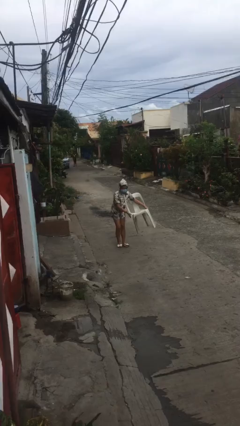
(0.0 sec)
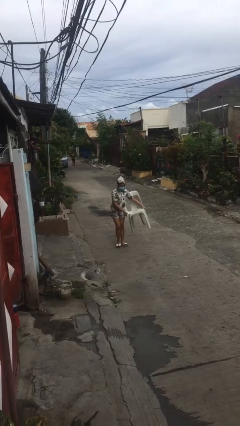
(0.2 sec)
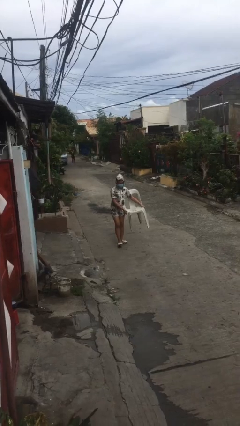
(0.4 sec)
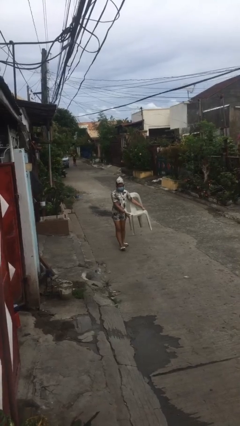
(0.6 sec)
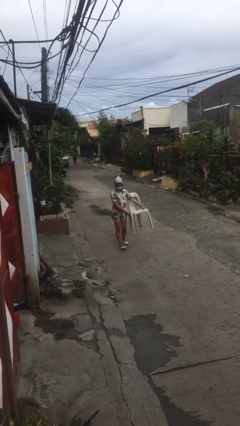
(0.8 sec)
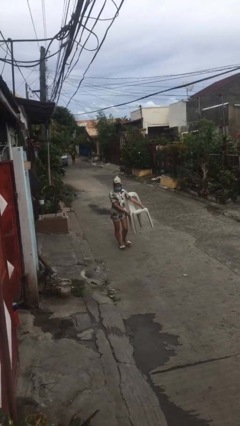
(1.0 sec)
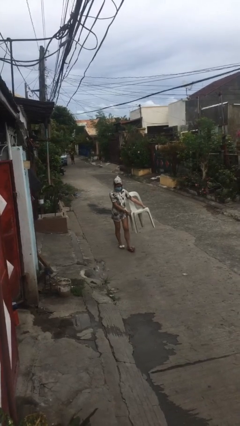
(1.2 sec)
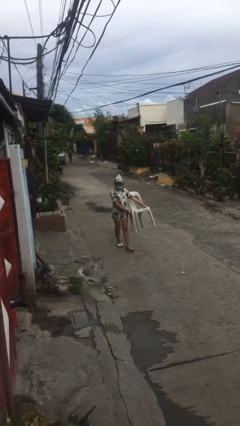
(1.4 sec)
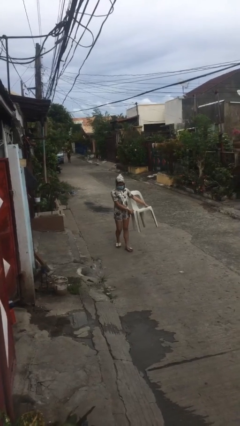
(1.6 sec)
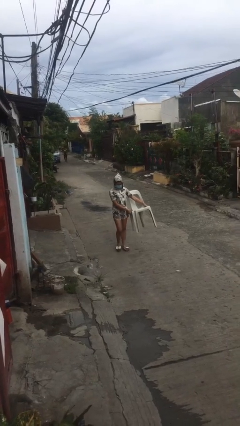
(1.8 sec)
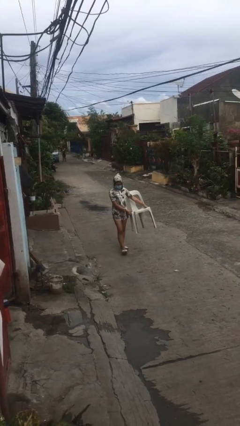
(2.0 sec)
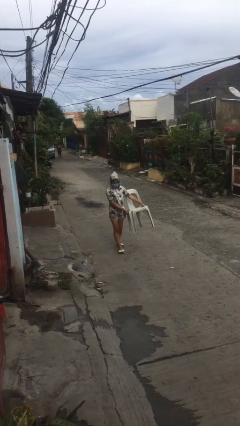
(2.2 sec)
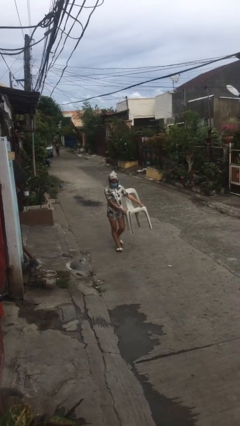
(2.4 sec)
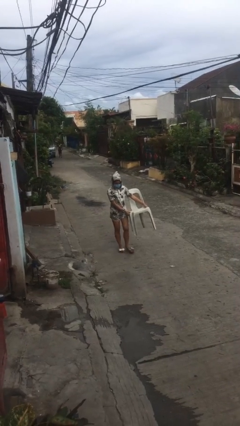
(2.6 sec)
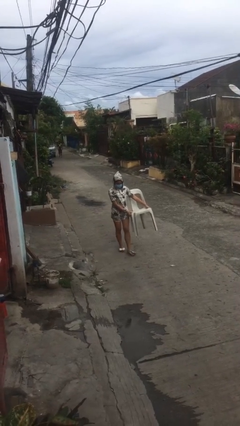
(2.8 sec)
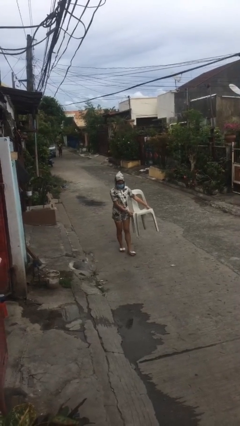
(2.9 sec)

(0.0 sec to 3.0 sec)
person carries heavy object

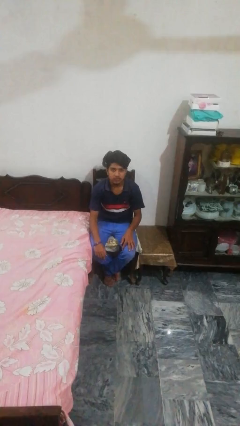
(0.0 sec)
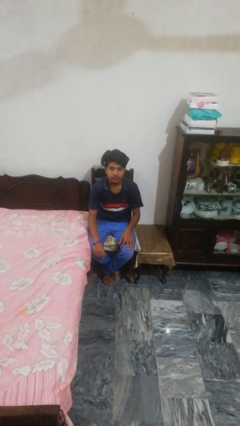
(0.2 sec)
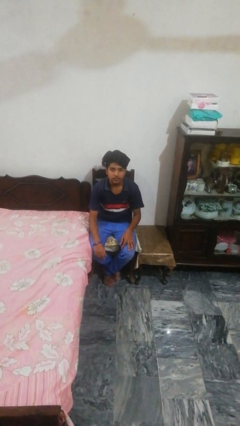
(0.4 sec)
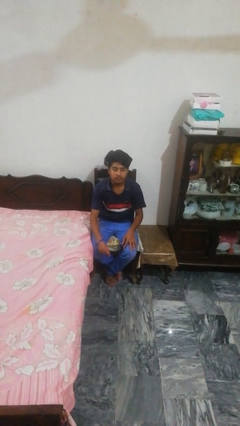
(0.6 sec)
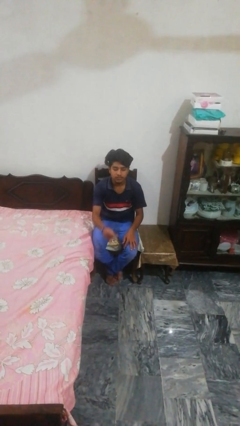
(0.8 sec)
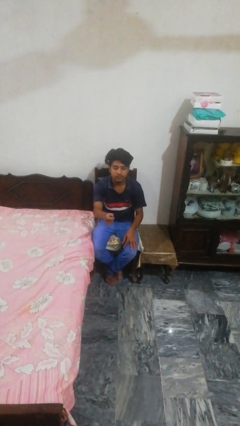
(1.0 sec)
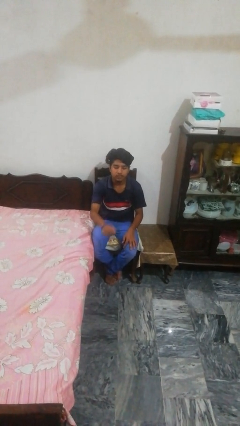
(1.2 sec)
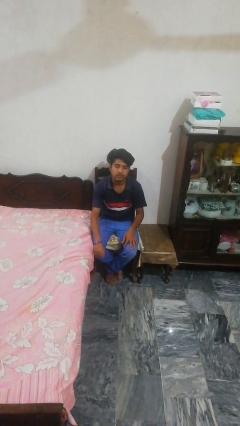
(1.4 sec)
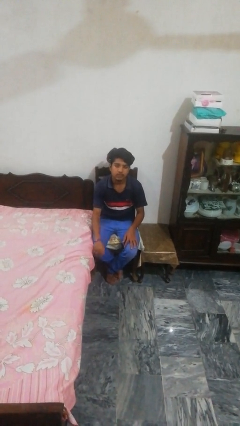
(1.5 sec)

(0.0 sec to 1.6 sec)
person snaps fingers

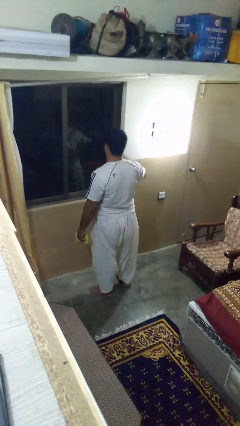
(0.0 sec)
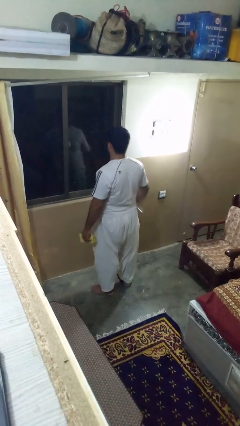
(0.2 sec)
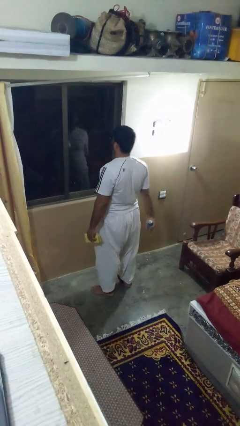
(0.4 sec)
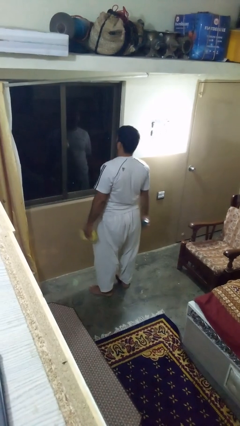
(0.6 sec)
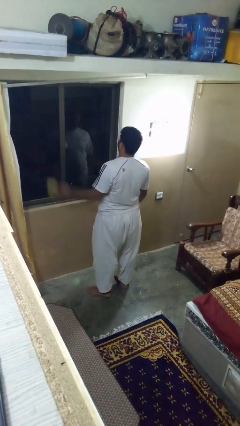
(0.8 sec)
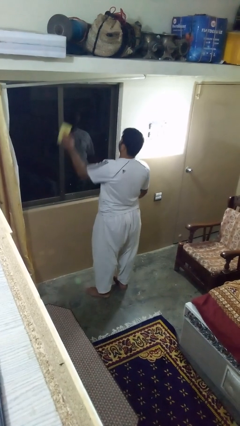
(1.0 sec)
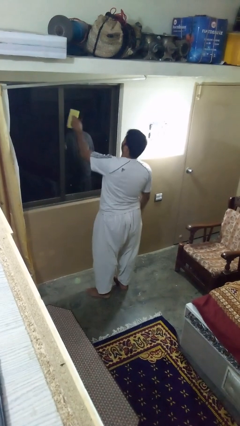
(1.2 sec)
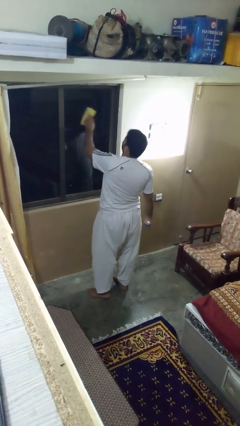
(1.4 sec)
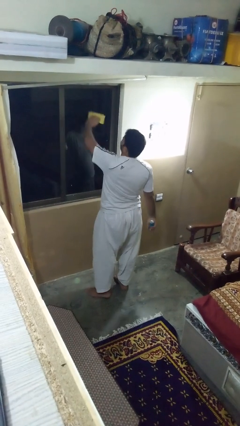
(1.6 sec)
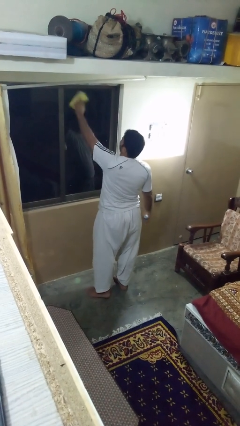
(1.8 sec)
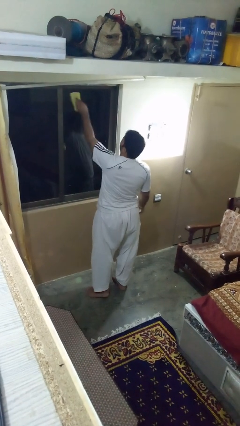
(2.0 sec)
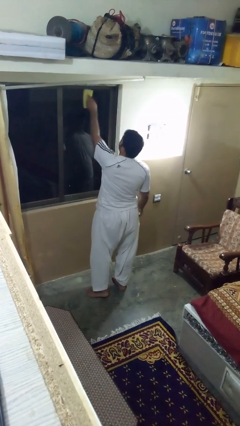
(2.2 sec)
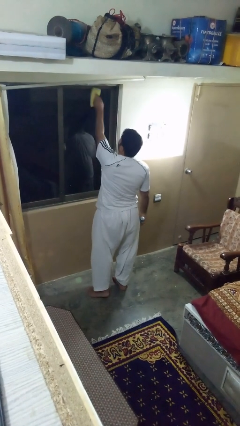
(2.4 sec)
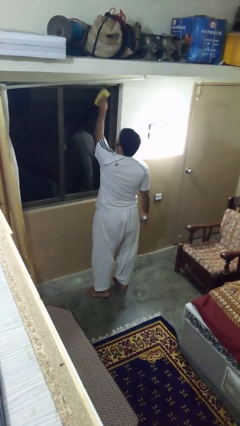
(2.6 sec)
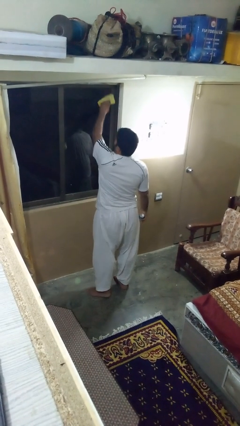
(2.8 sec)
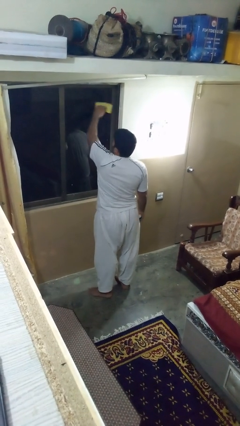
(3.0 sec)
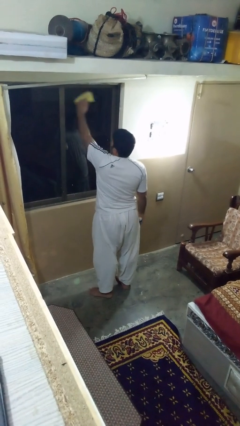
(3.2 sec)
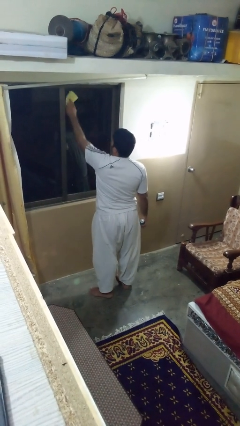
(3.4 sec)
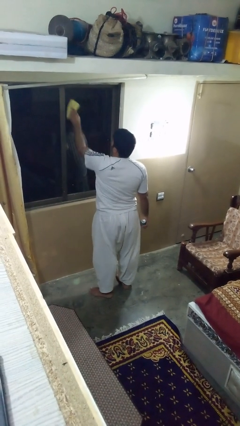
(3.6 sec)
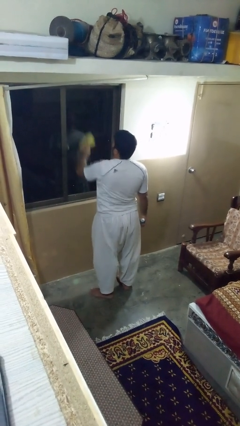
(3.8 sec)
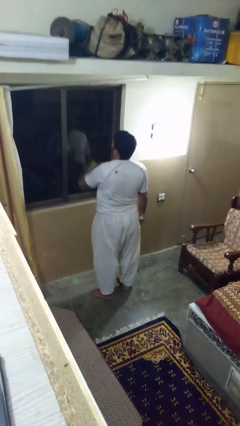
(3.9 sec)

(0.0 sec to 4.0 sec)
person washes window

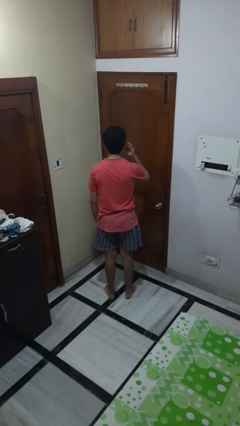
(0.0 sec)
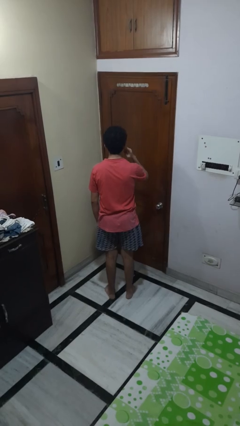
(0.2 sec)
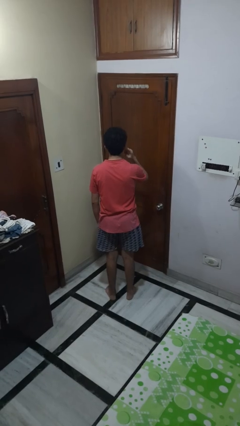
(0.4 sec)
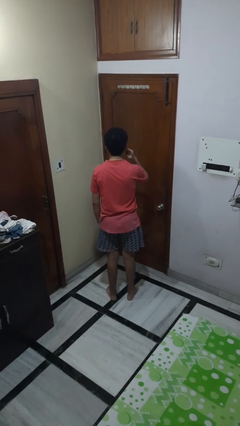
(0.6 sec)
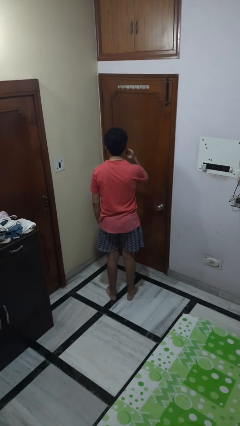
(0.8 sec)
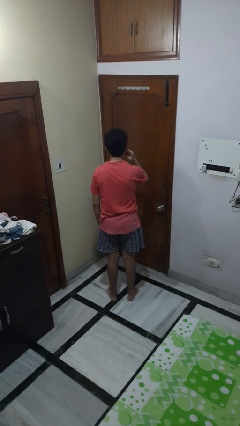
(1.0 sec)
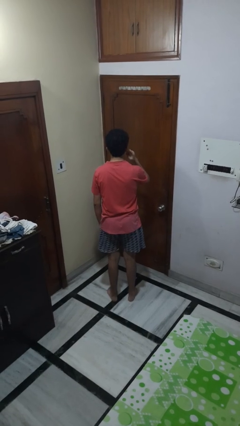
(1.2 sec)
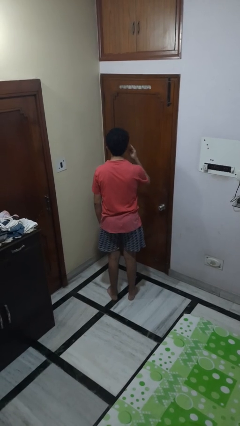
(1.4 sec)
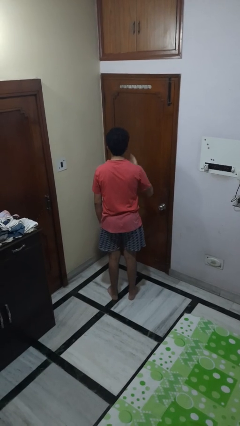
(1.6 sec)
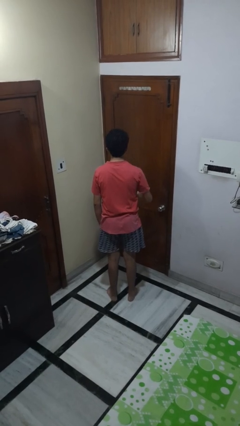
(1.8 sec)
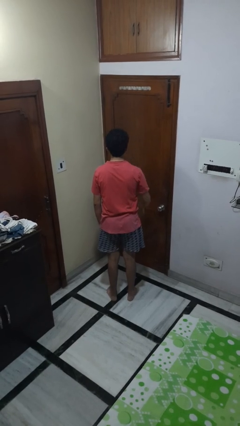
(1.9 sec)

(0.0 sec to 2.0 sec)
person gestures listen closely

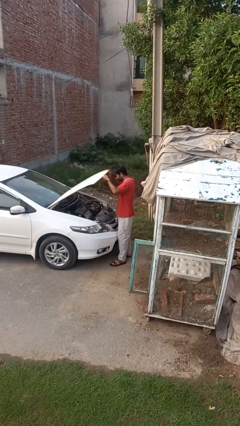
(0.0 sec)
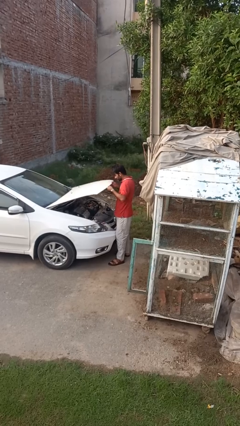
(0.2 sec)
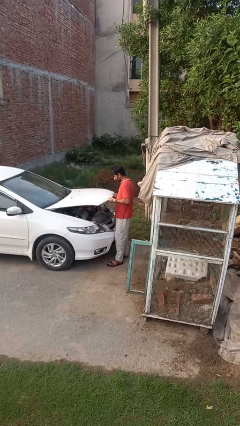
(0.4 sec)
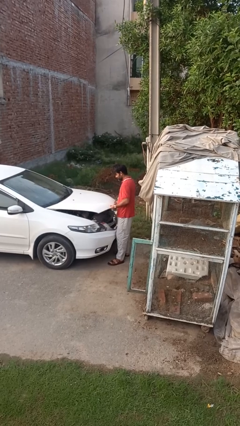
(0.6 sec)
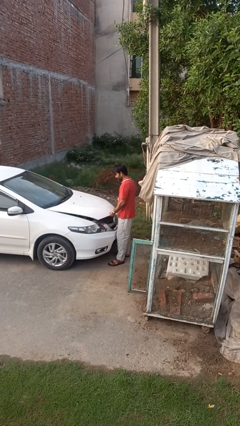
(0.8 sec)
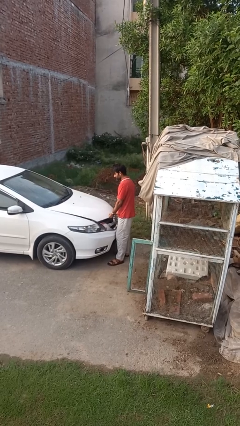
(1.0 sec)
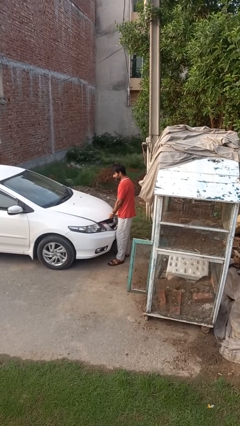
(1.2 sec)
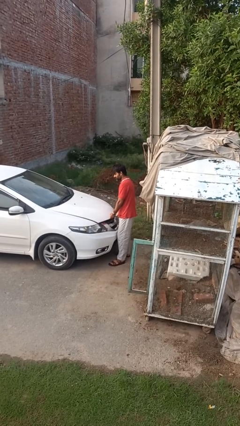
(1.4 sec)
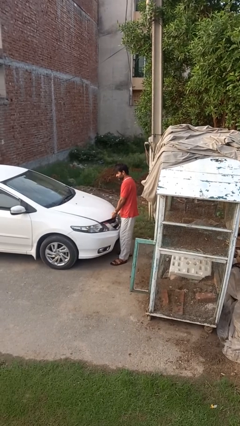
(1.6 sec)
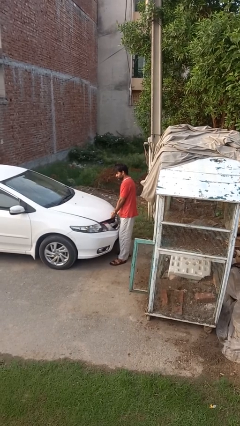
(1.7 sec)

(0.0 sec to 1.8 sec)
person closes car hood

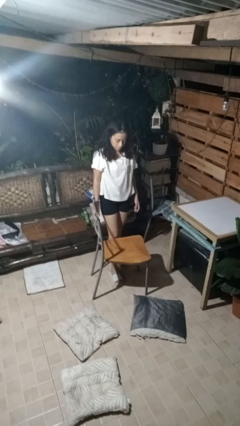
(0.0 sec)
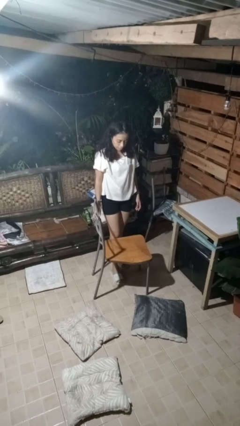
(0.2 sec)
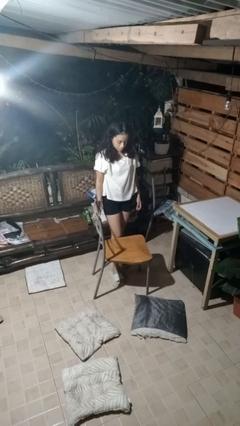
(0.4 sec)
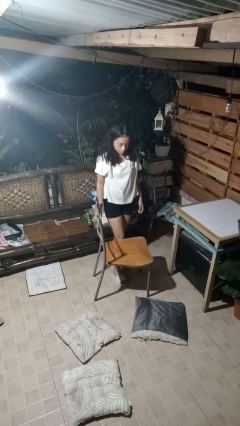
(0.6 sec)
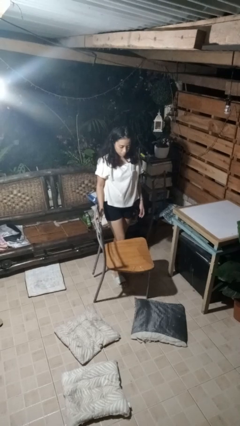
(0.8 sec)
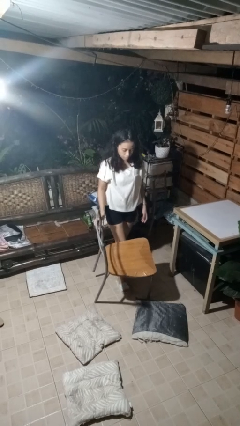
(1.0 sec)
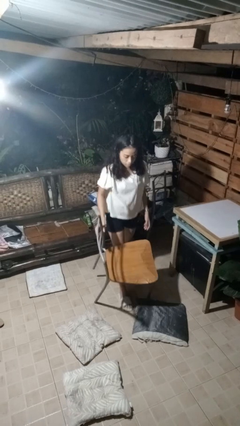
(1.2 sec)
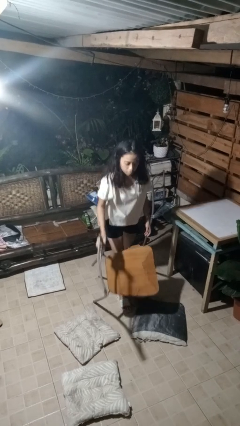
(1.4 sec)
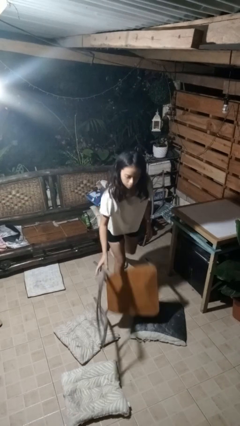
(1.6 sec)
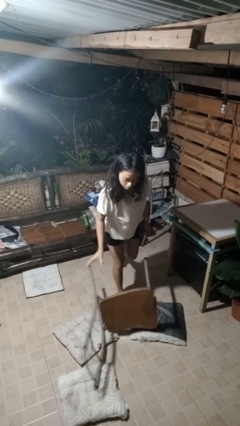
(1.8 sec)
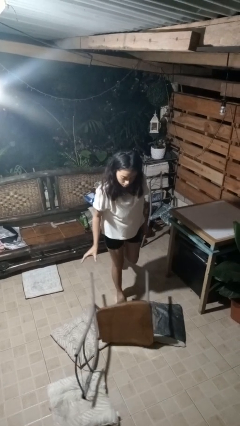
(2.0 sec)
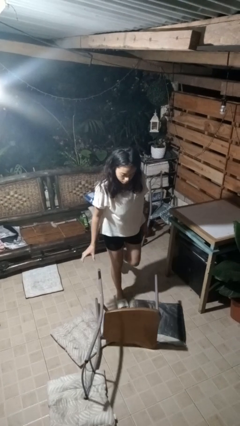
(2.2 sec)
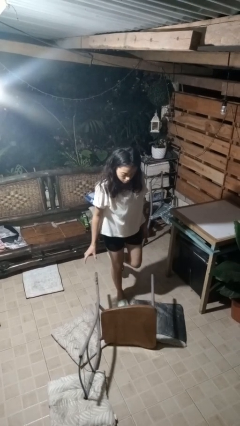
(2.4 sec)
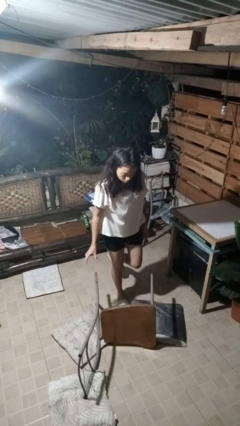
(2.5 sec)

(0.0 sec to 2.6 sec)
person knocks over furniture

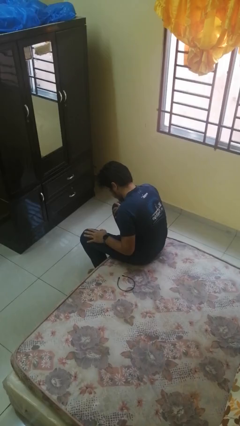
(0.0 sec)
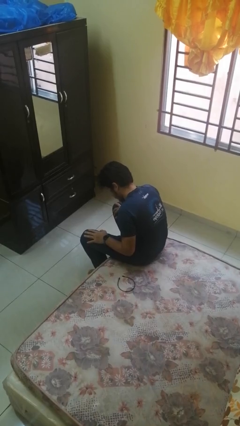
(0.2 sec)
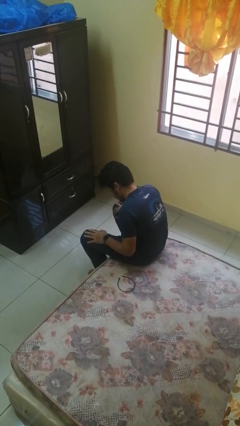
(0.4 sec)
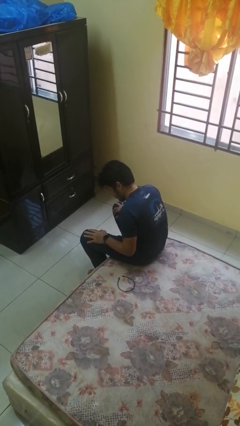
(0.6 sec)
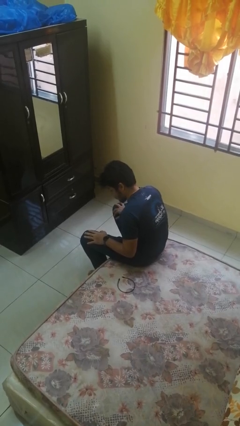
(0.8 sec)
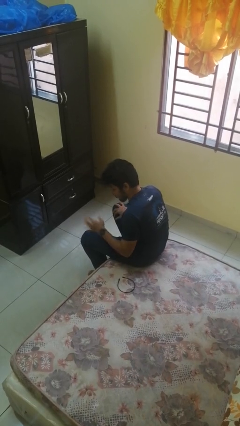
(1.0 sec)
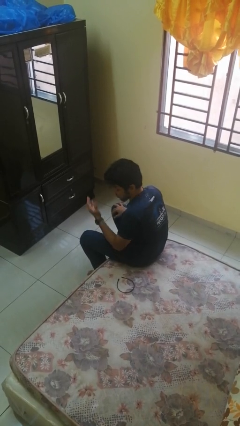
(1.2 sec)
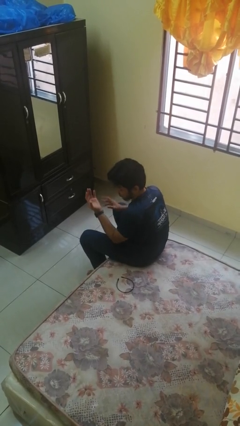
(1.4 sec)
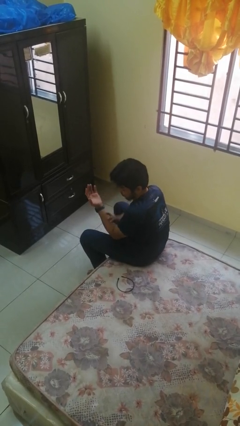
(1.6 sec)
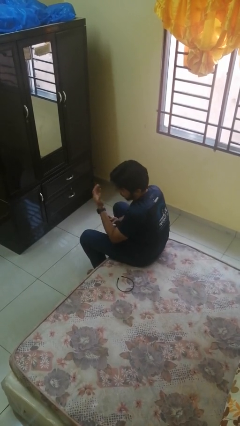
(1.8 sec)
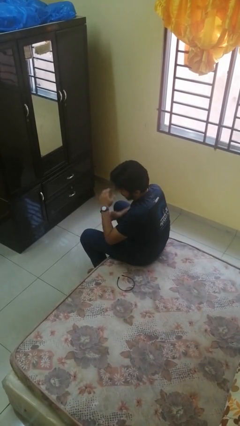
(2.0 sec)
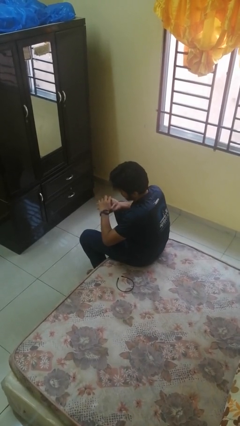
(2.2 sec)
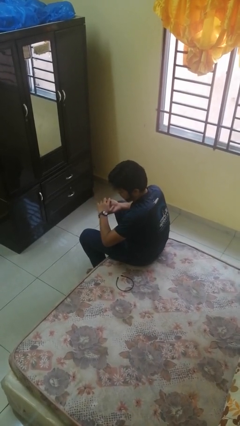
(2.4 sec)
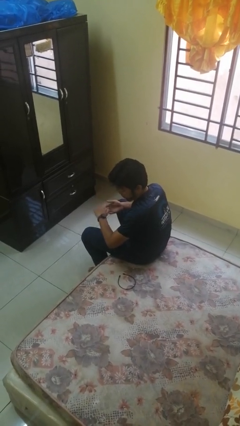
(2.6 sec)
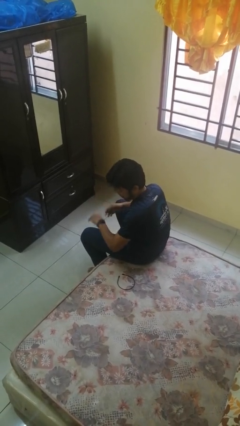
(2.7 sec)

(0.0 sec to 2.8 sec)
person looks at hands in lap
